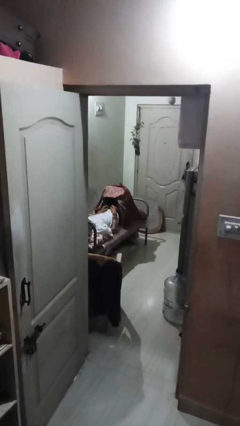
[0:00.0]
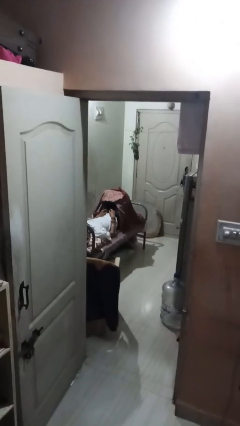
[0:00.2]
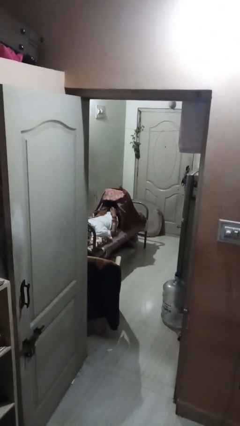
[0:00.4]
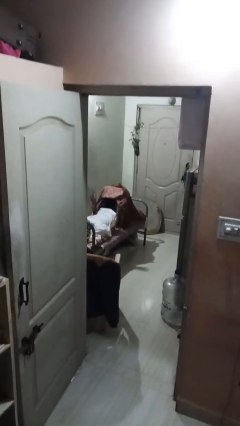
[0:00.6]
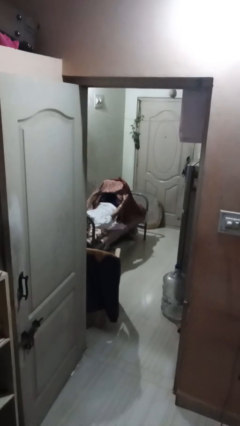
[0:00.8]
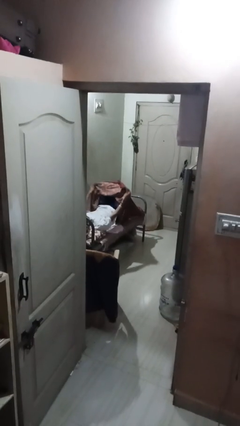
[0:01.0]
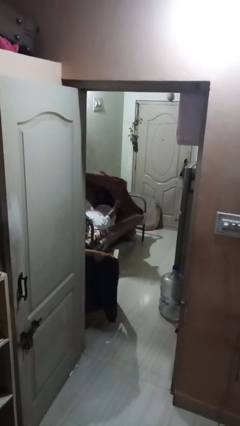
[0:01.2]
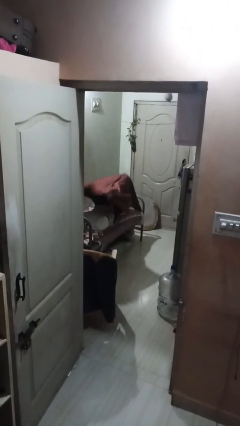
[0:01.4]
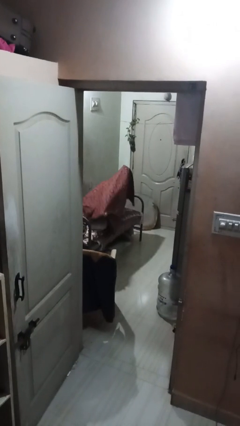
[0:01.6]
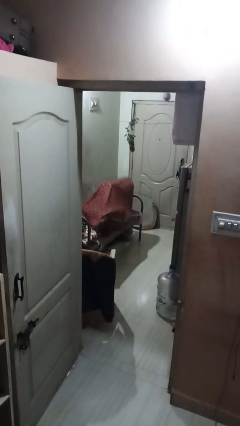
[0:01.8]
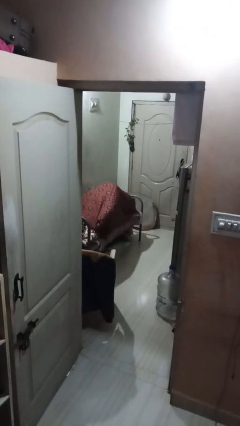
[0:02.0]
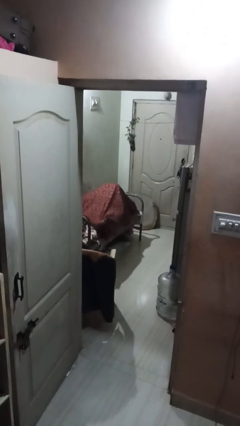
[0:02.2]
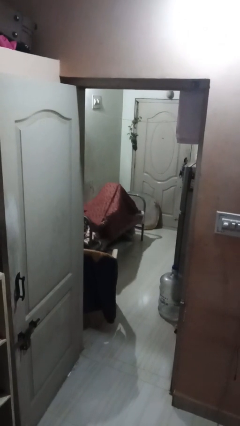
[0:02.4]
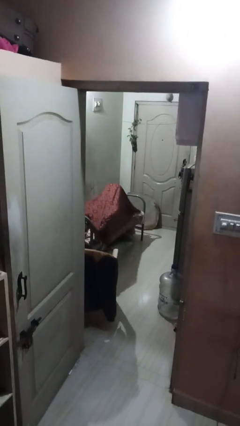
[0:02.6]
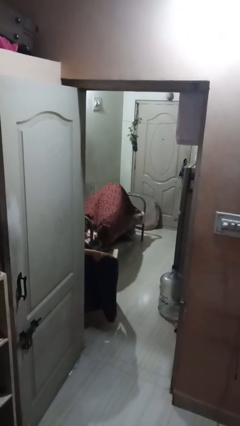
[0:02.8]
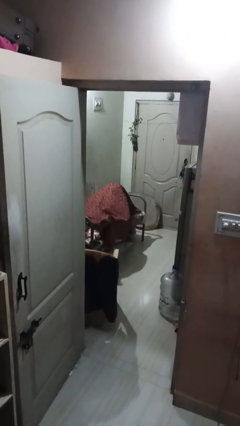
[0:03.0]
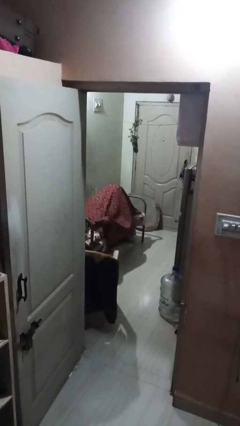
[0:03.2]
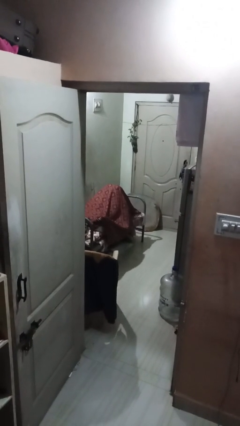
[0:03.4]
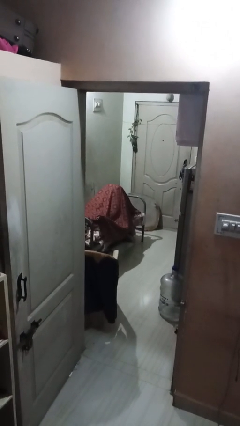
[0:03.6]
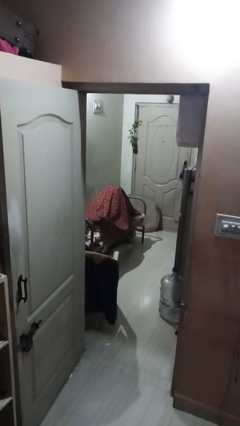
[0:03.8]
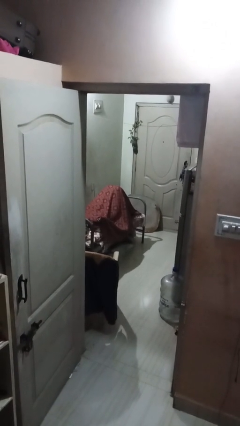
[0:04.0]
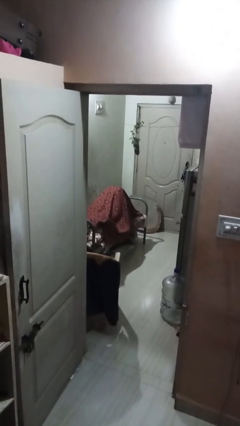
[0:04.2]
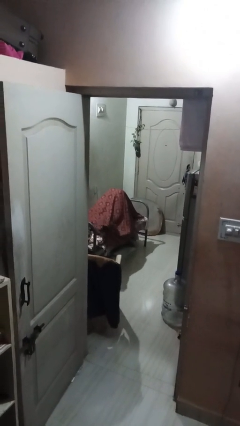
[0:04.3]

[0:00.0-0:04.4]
person covers with bedsheets

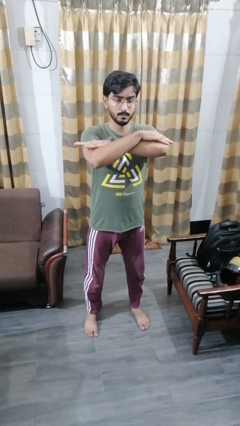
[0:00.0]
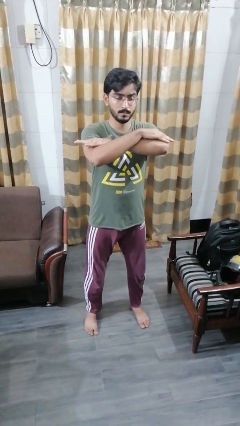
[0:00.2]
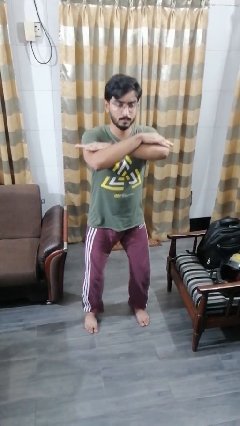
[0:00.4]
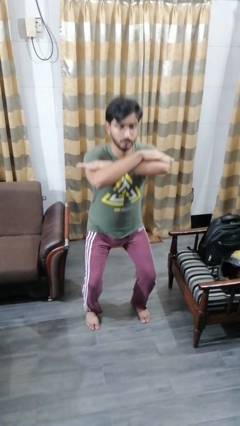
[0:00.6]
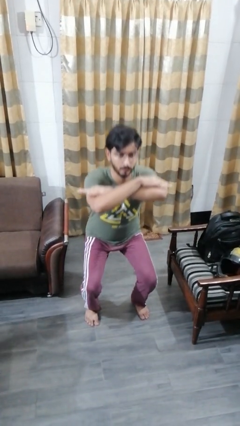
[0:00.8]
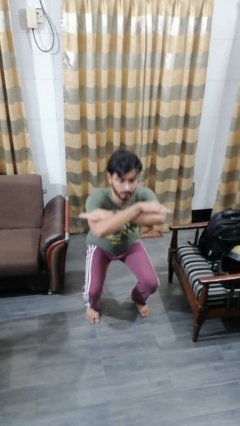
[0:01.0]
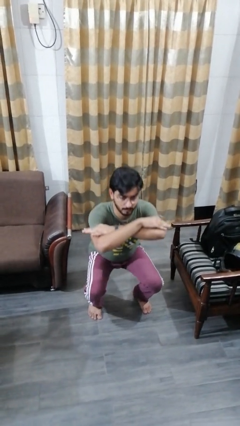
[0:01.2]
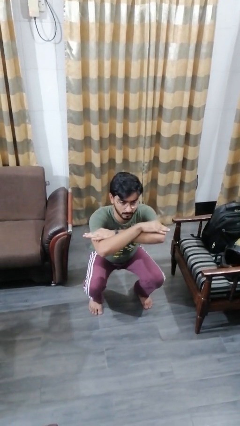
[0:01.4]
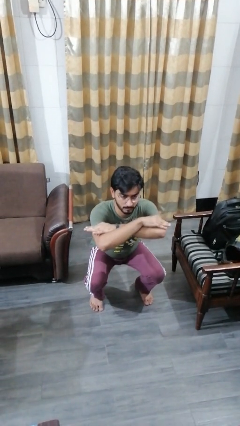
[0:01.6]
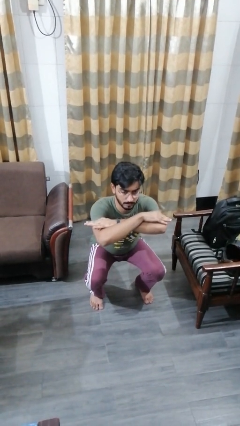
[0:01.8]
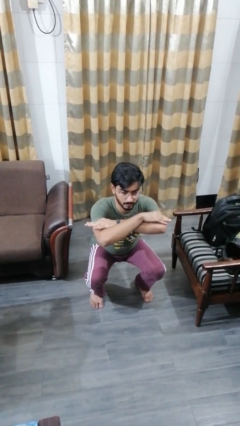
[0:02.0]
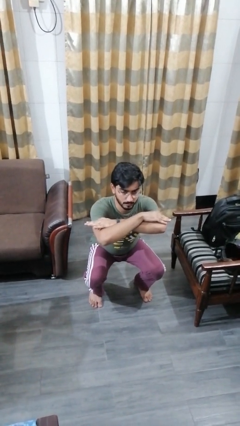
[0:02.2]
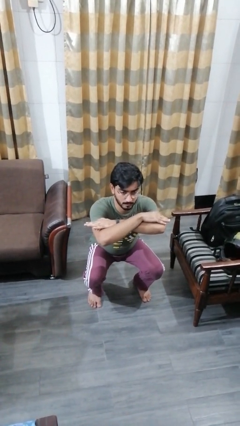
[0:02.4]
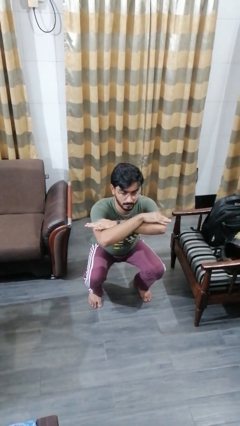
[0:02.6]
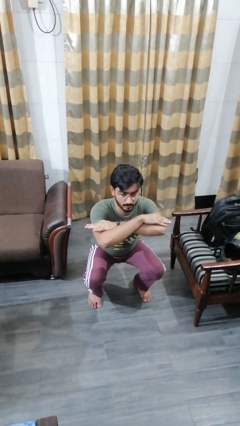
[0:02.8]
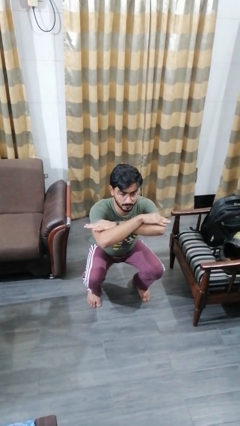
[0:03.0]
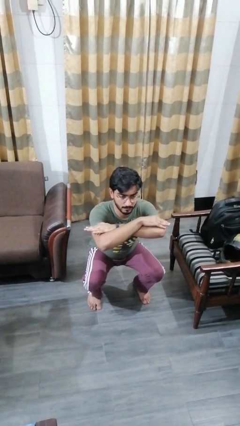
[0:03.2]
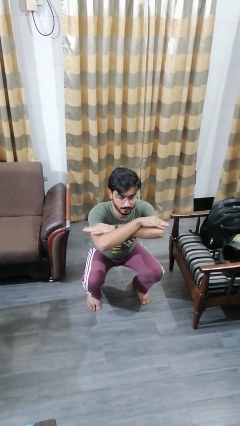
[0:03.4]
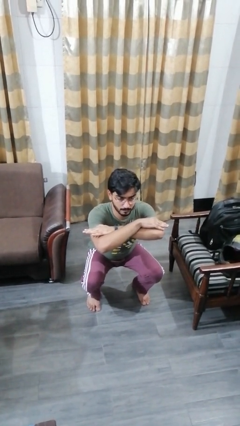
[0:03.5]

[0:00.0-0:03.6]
person sits crisscross

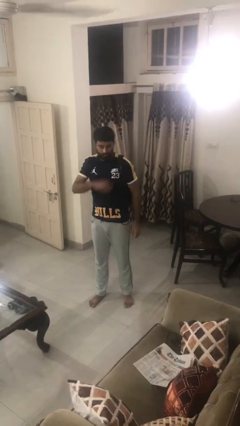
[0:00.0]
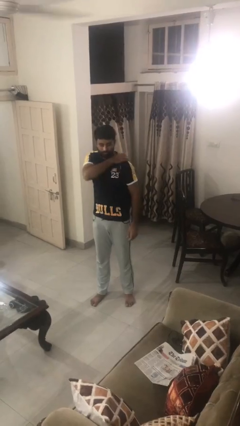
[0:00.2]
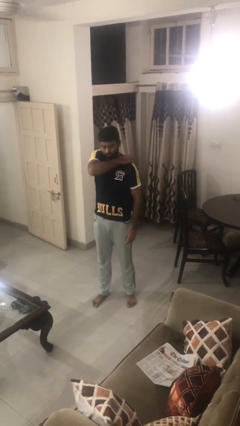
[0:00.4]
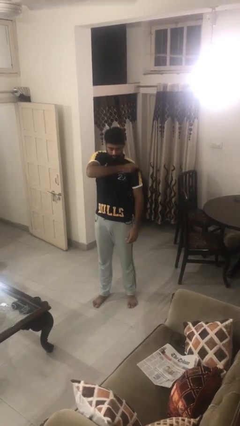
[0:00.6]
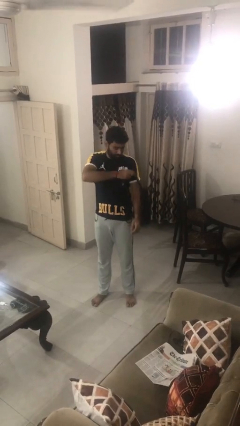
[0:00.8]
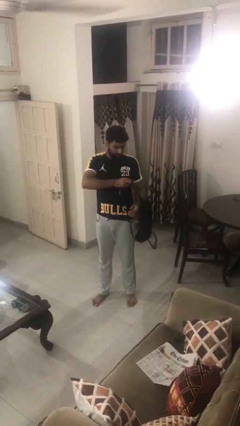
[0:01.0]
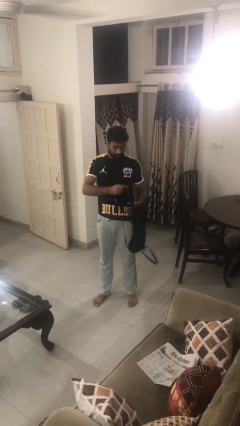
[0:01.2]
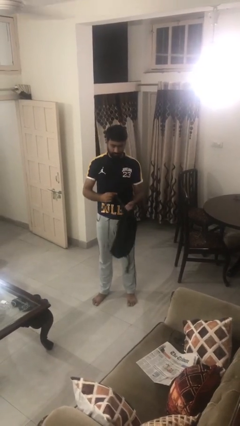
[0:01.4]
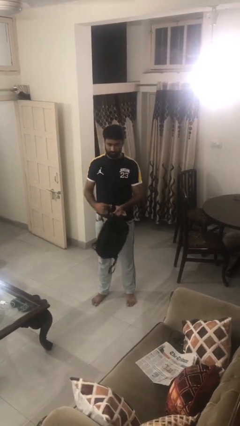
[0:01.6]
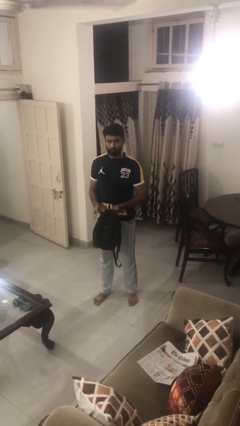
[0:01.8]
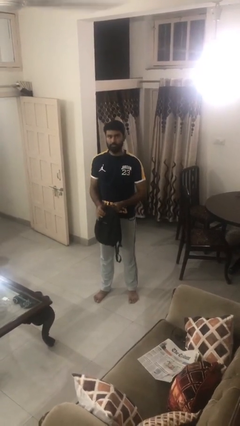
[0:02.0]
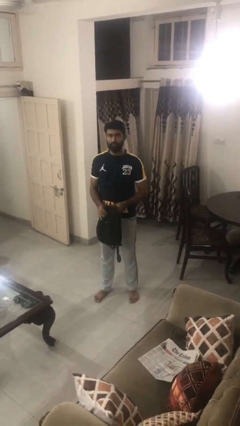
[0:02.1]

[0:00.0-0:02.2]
person takes off backpack

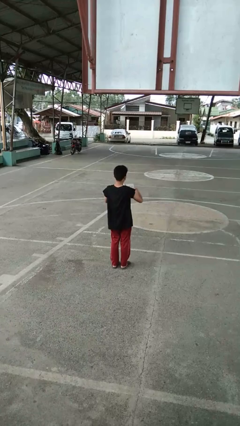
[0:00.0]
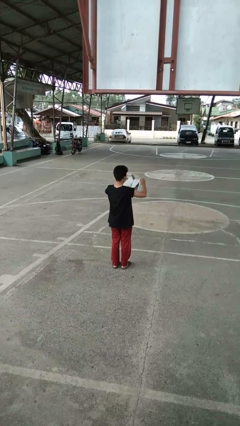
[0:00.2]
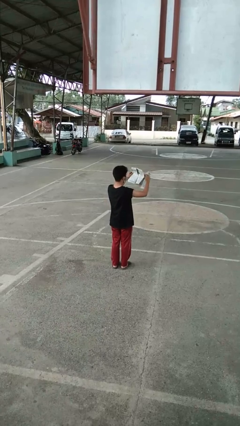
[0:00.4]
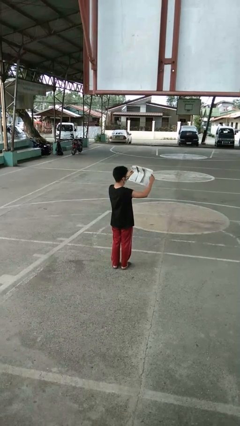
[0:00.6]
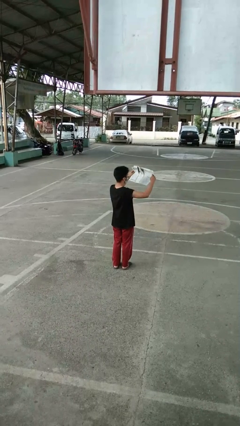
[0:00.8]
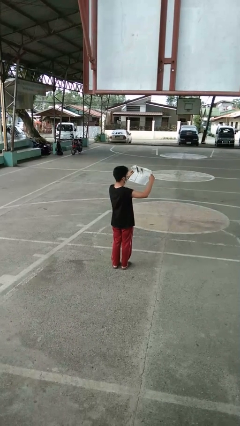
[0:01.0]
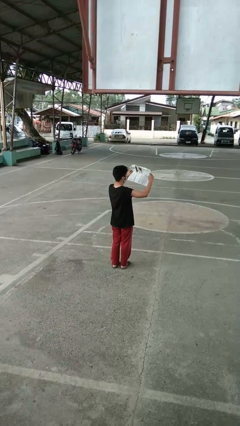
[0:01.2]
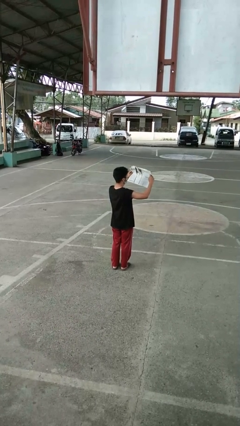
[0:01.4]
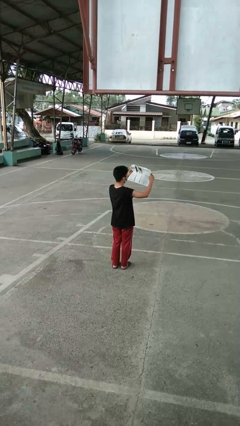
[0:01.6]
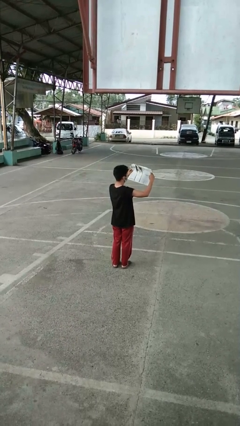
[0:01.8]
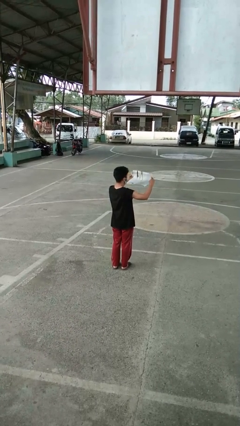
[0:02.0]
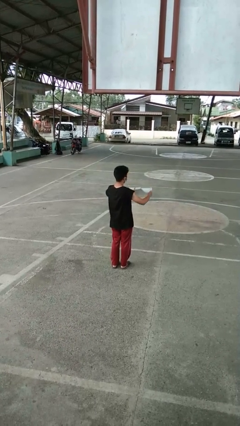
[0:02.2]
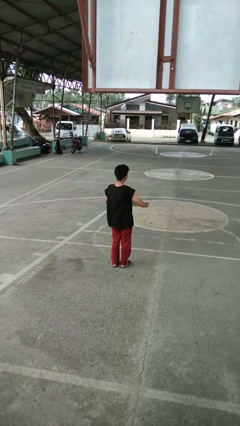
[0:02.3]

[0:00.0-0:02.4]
person reads newspaper

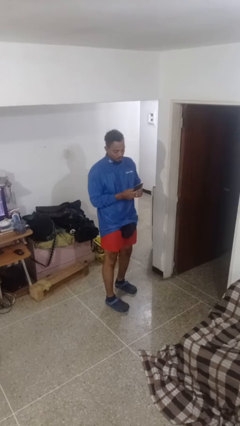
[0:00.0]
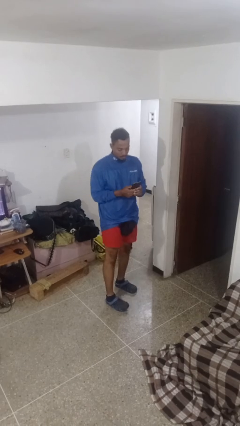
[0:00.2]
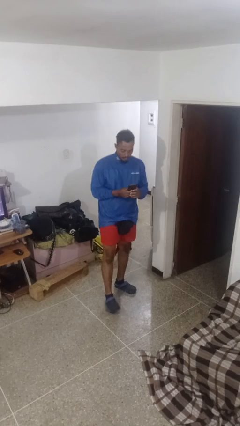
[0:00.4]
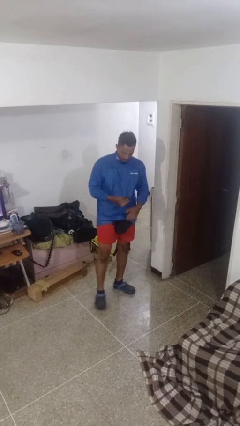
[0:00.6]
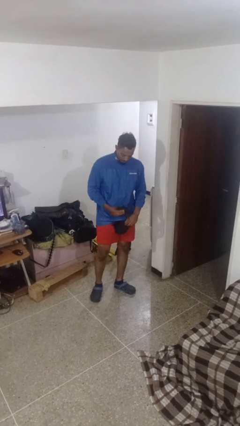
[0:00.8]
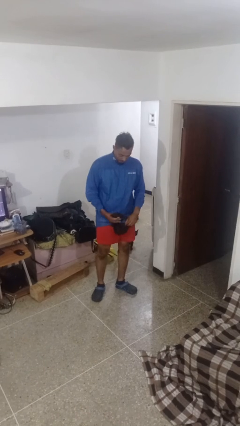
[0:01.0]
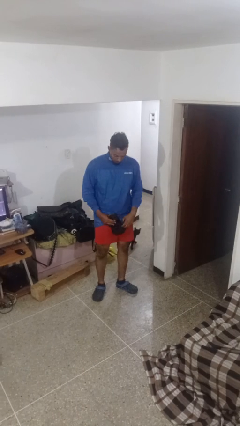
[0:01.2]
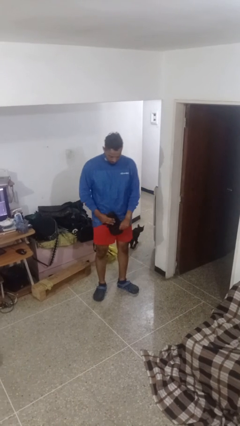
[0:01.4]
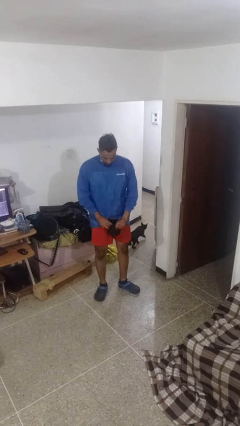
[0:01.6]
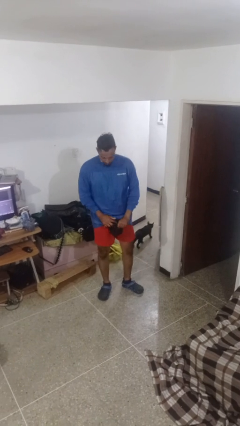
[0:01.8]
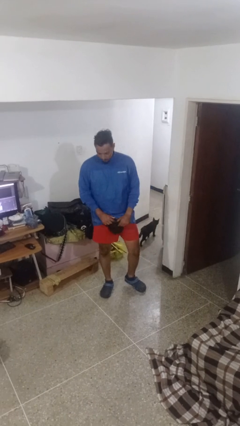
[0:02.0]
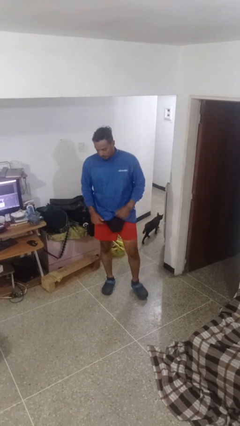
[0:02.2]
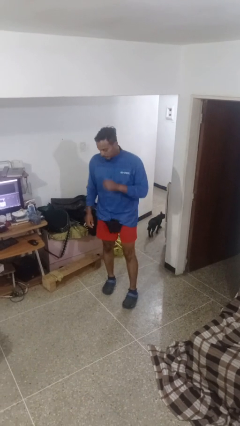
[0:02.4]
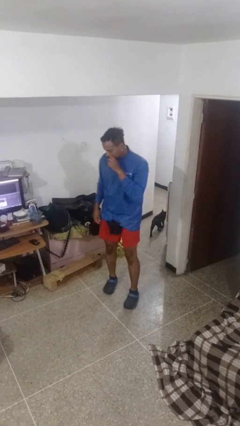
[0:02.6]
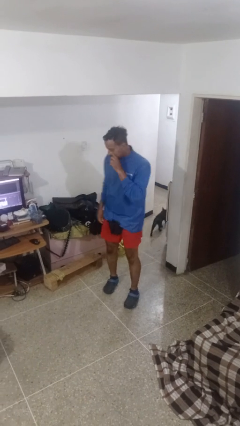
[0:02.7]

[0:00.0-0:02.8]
person puts phone into pocket

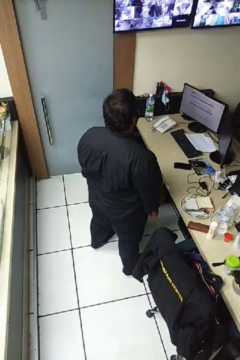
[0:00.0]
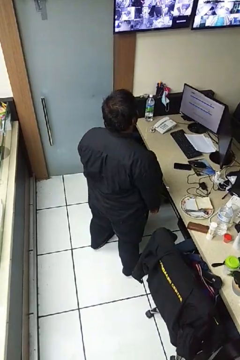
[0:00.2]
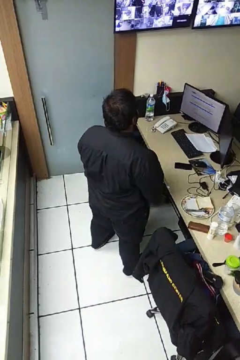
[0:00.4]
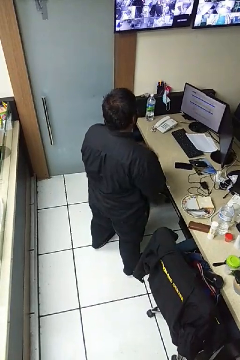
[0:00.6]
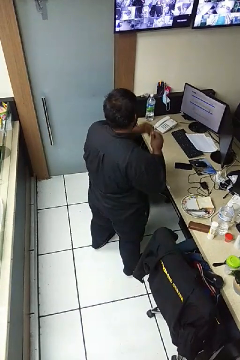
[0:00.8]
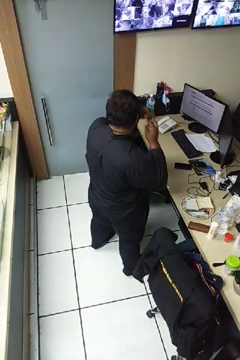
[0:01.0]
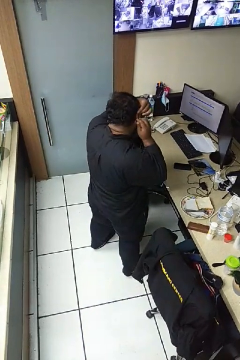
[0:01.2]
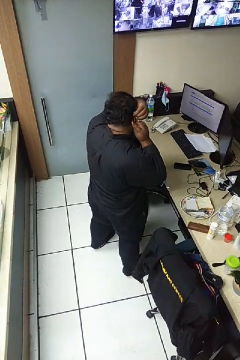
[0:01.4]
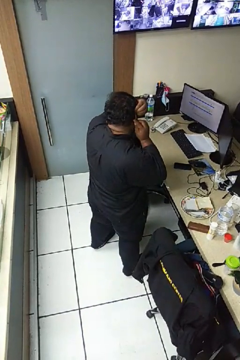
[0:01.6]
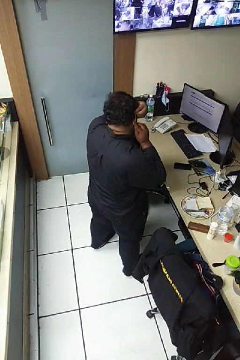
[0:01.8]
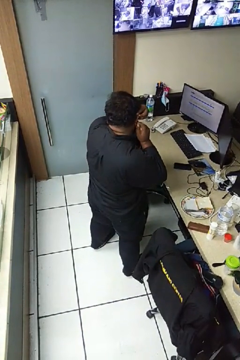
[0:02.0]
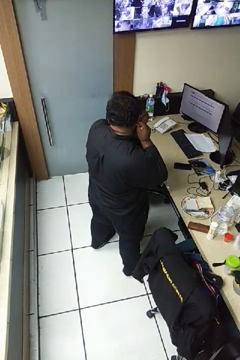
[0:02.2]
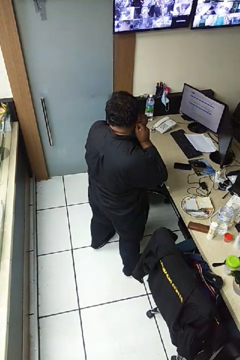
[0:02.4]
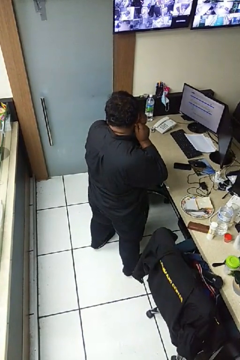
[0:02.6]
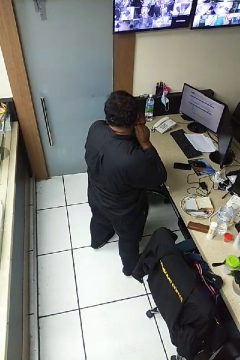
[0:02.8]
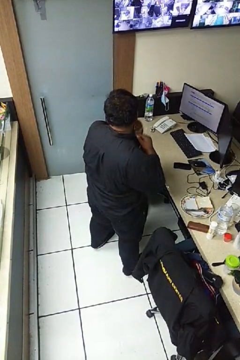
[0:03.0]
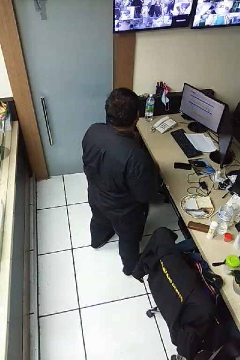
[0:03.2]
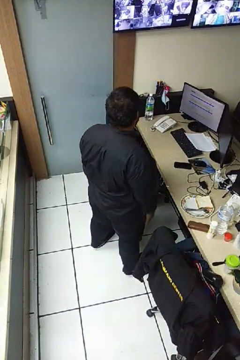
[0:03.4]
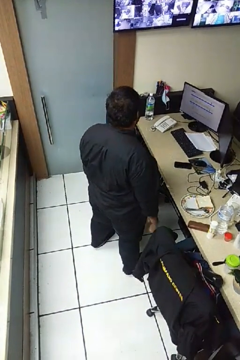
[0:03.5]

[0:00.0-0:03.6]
person puts on earrings
